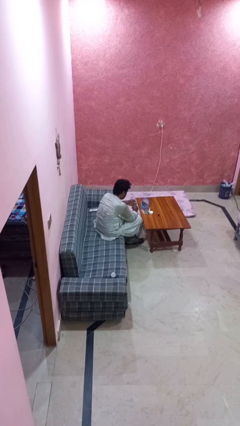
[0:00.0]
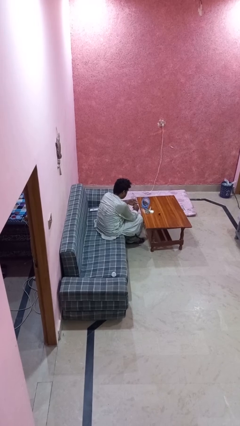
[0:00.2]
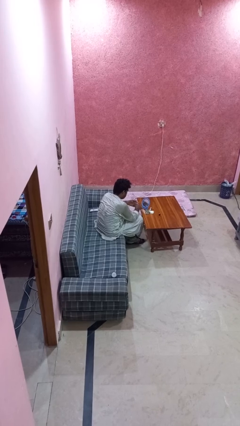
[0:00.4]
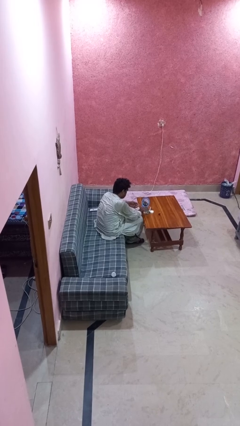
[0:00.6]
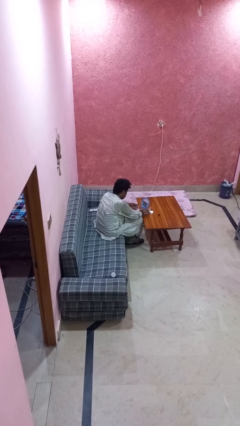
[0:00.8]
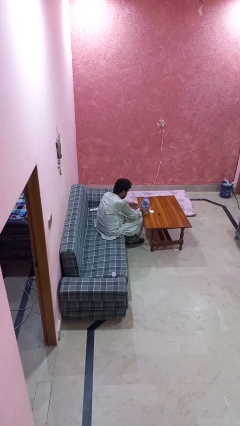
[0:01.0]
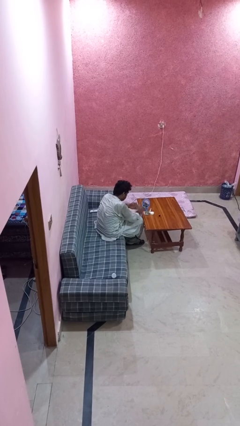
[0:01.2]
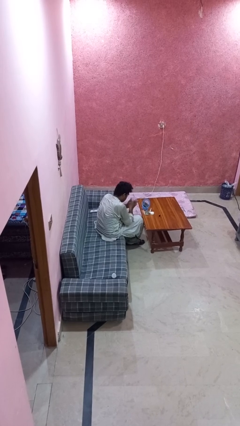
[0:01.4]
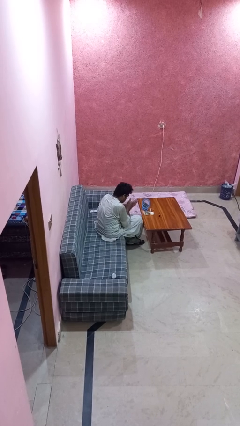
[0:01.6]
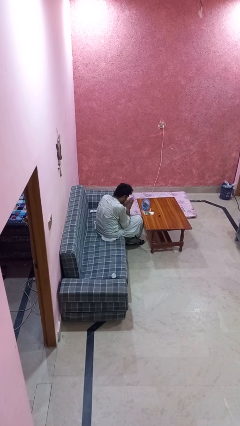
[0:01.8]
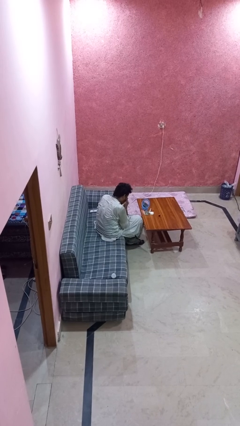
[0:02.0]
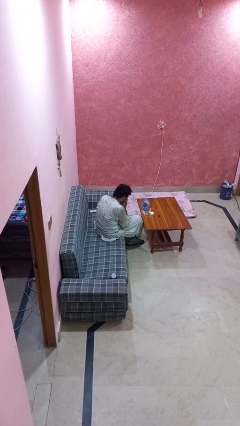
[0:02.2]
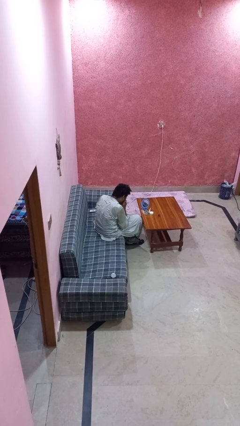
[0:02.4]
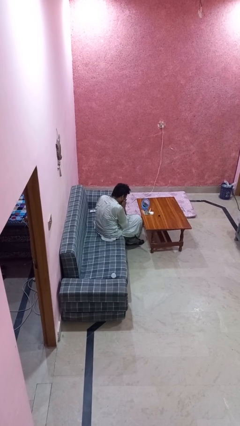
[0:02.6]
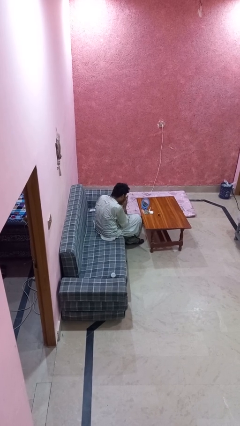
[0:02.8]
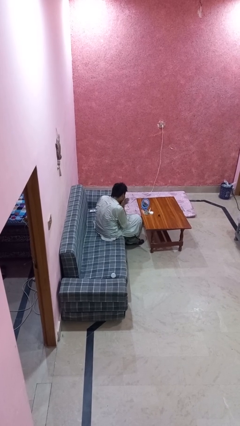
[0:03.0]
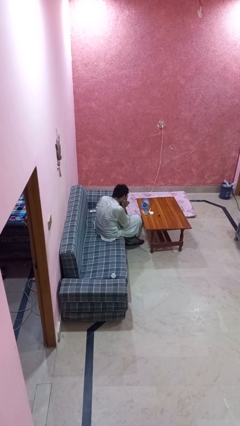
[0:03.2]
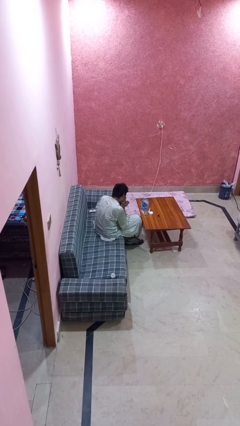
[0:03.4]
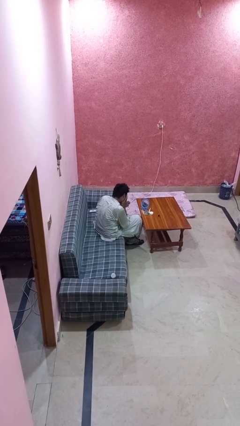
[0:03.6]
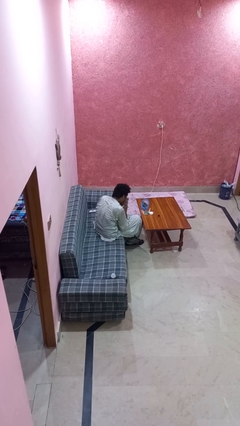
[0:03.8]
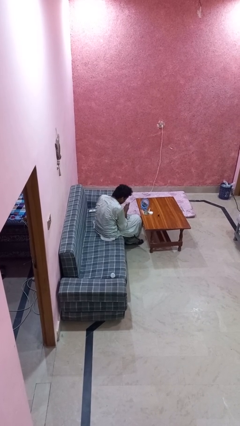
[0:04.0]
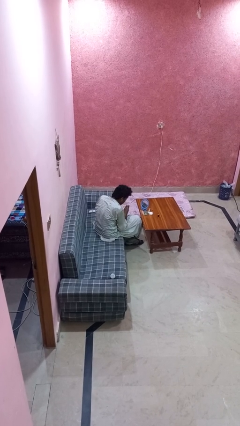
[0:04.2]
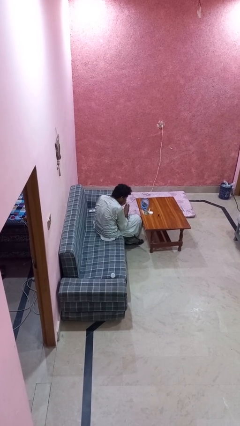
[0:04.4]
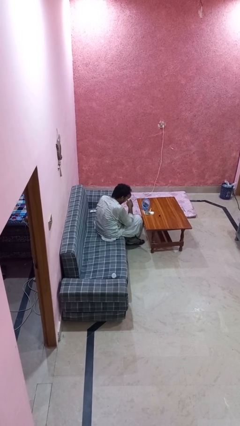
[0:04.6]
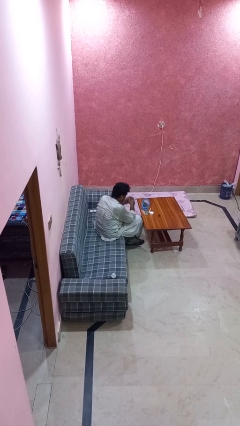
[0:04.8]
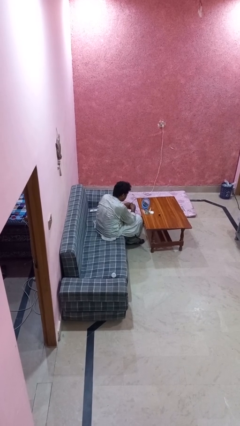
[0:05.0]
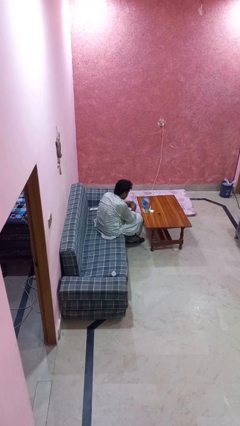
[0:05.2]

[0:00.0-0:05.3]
person applies foundation makeup

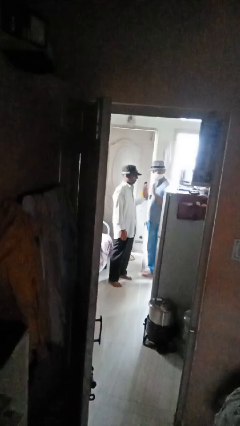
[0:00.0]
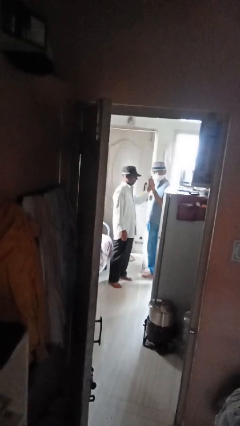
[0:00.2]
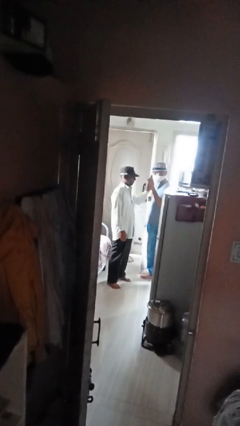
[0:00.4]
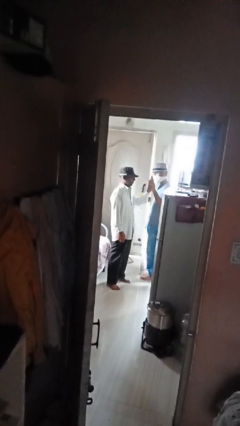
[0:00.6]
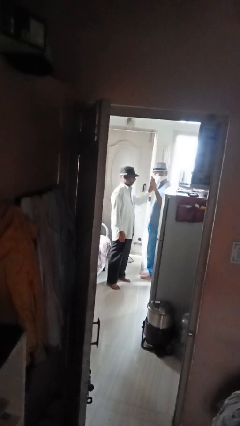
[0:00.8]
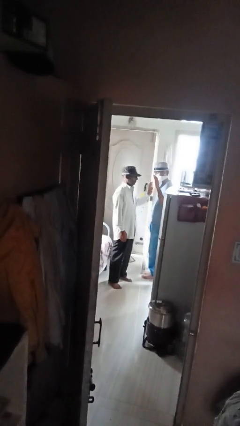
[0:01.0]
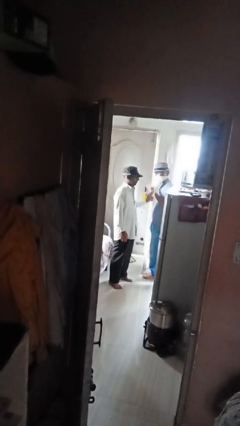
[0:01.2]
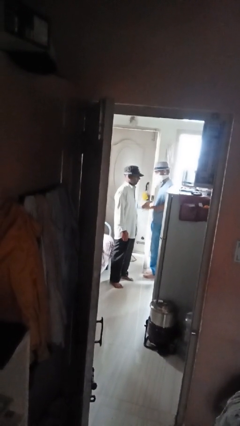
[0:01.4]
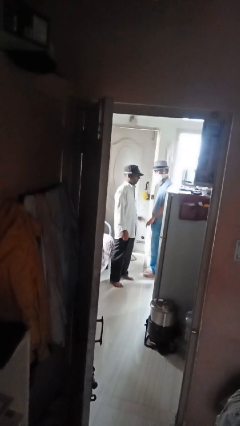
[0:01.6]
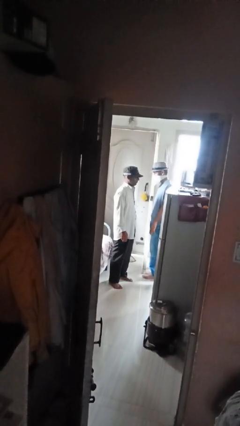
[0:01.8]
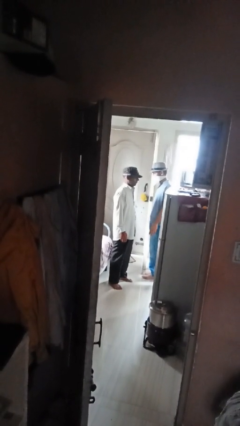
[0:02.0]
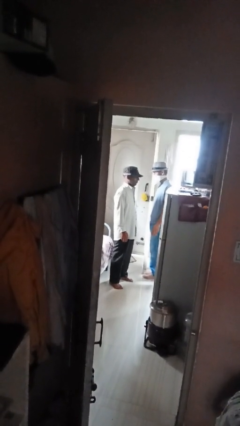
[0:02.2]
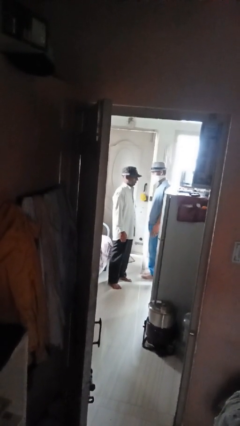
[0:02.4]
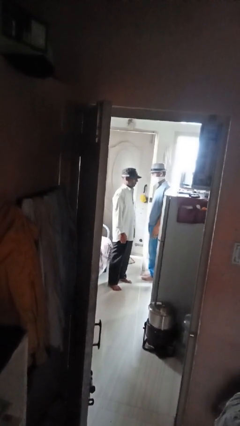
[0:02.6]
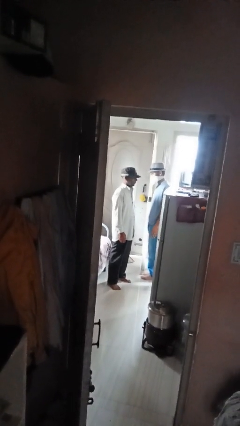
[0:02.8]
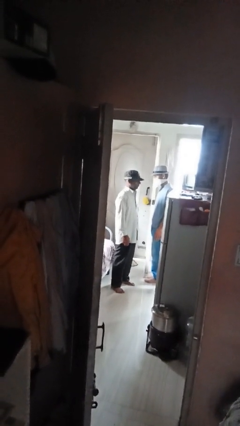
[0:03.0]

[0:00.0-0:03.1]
person highfives hand

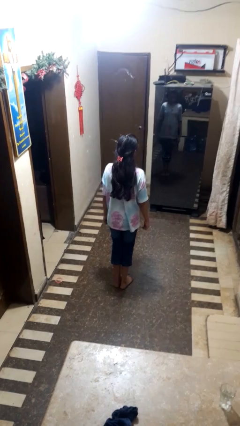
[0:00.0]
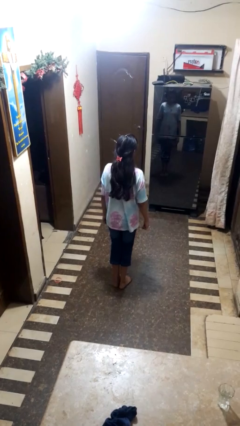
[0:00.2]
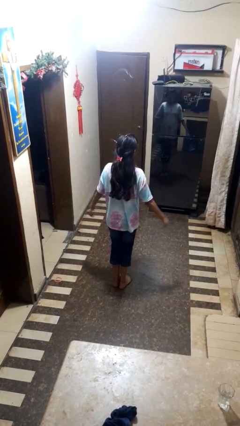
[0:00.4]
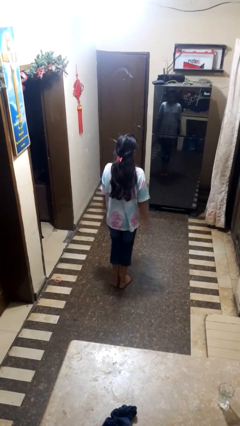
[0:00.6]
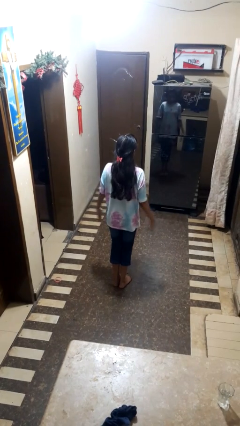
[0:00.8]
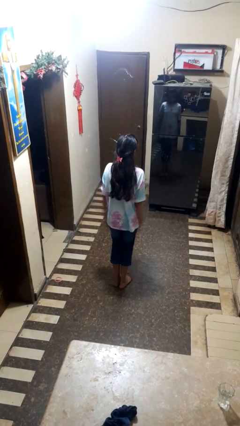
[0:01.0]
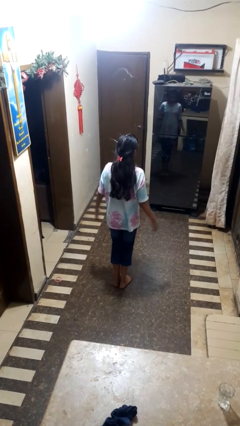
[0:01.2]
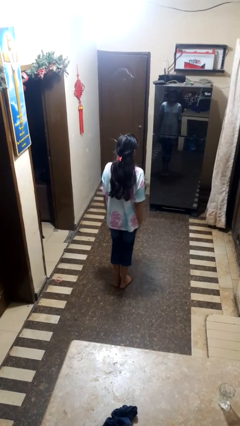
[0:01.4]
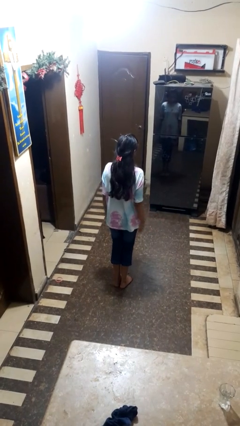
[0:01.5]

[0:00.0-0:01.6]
person slaps hands on thighs

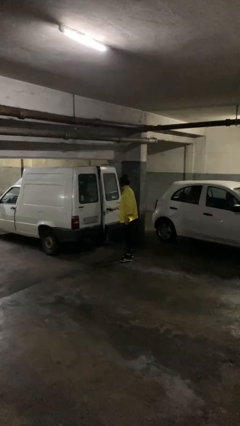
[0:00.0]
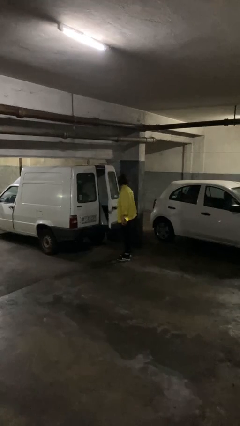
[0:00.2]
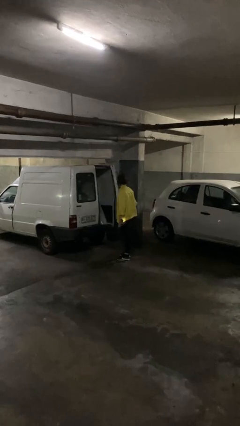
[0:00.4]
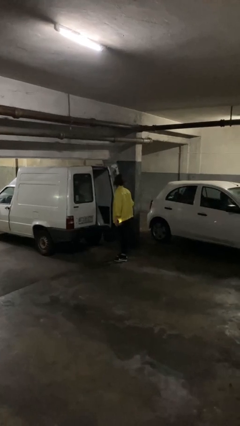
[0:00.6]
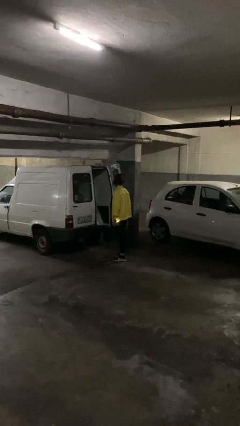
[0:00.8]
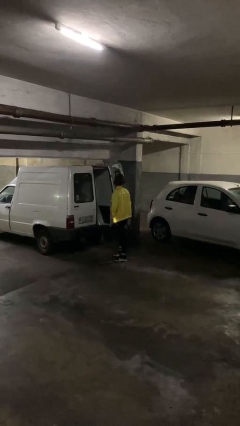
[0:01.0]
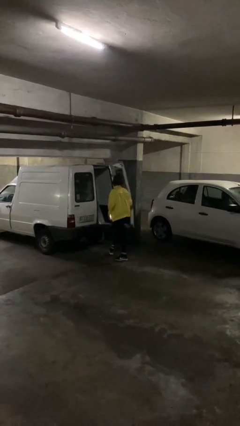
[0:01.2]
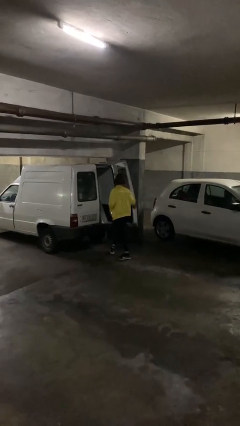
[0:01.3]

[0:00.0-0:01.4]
person opens car door

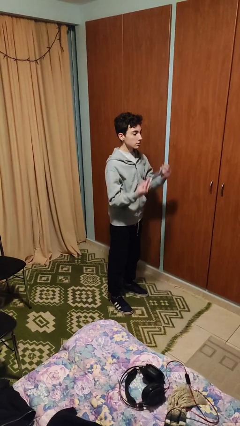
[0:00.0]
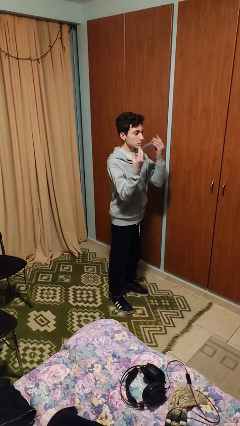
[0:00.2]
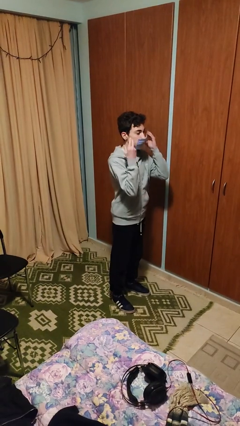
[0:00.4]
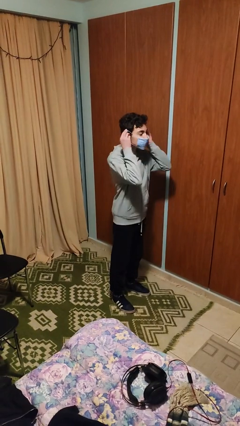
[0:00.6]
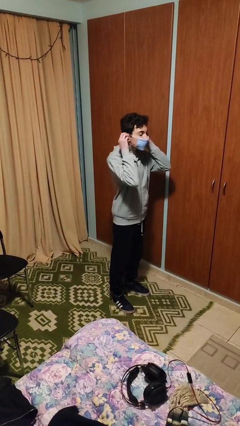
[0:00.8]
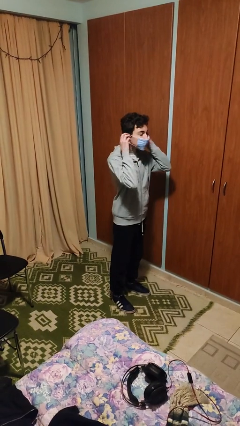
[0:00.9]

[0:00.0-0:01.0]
person puts on facemask

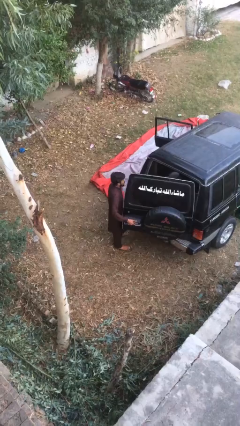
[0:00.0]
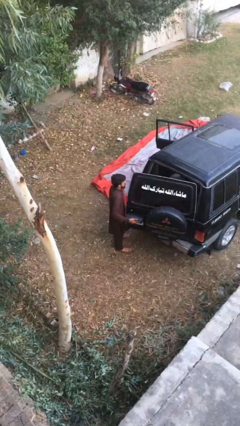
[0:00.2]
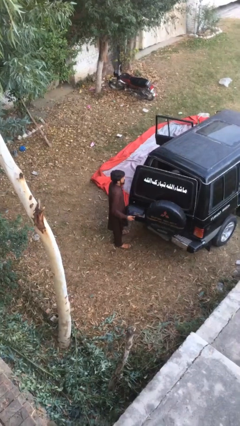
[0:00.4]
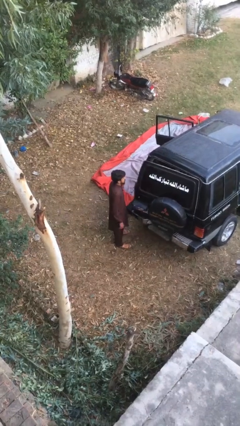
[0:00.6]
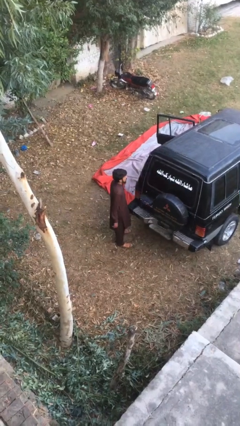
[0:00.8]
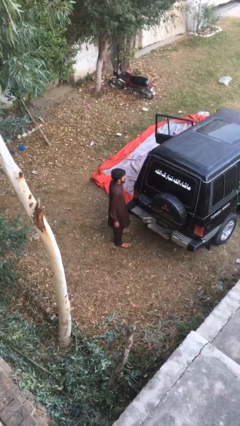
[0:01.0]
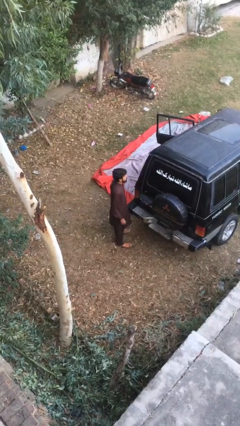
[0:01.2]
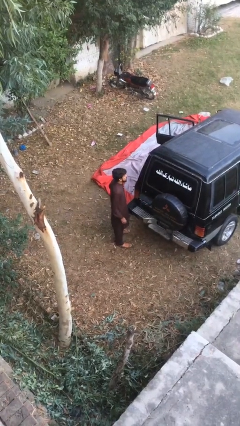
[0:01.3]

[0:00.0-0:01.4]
person closes car trunk

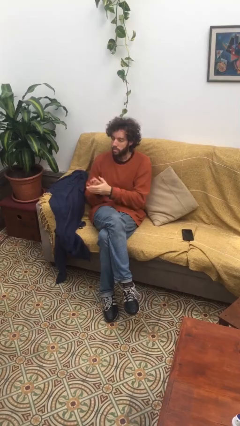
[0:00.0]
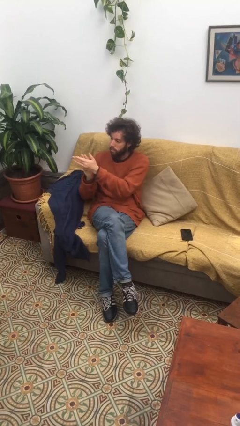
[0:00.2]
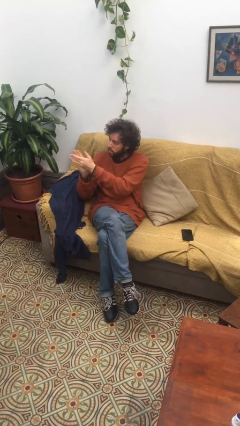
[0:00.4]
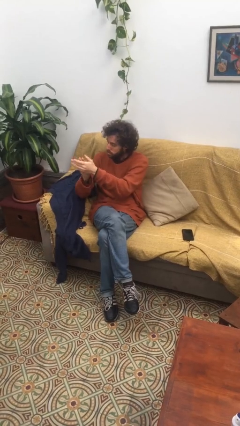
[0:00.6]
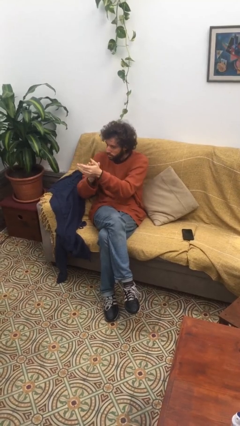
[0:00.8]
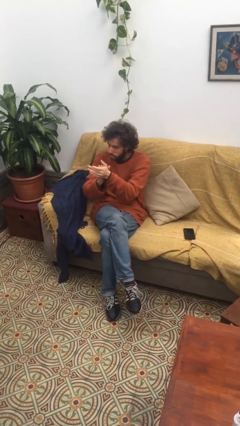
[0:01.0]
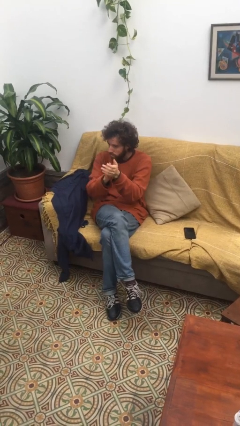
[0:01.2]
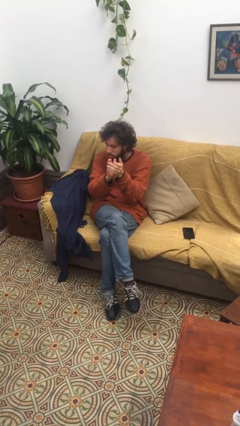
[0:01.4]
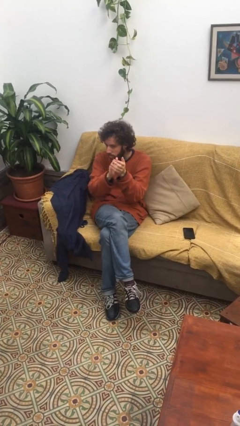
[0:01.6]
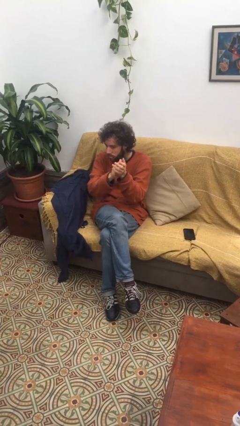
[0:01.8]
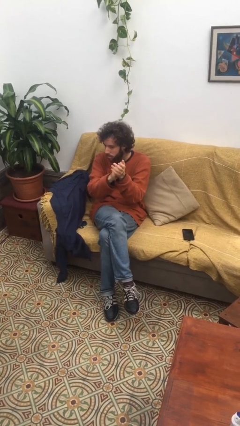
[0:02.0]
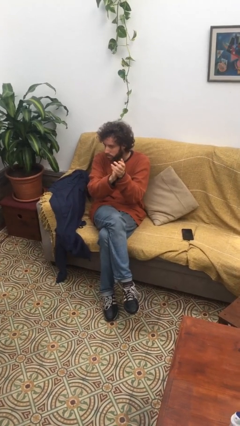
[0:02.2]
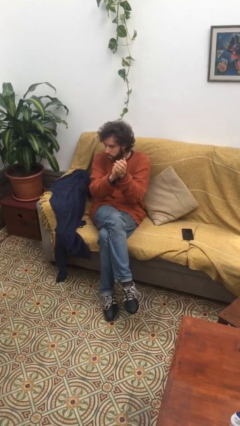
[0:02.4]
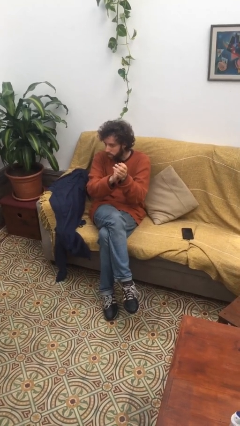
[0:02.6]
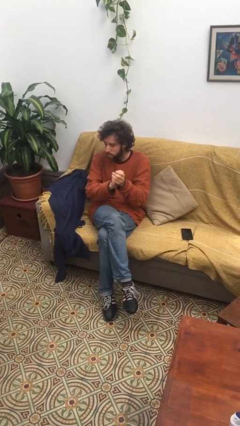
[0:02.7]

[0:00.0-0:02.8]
person claps hands

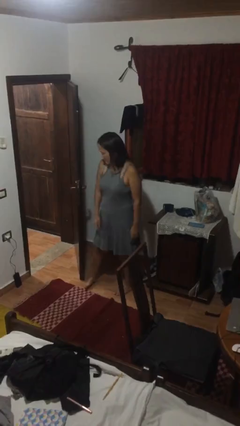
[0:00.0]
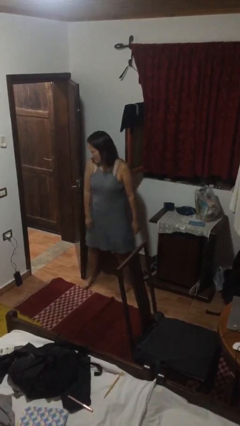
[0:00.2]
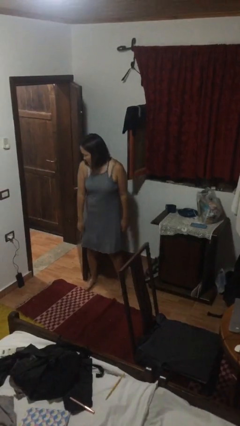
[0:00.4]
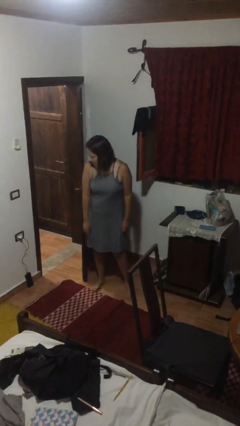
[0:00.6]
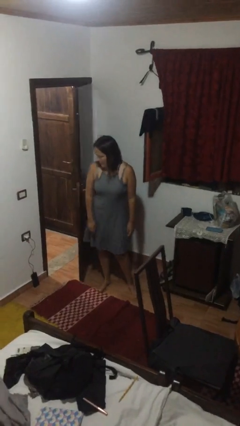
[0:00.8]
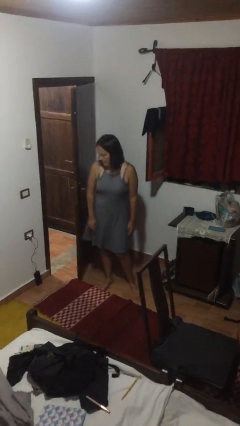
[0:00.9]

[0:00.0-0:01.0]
person closes door with hip
